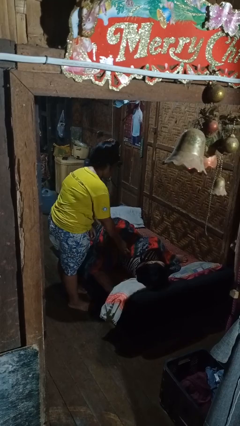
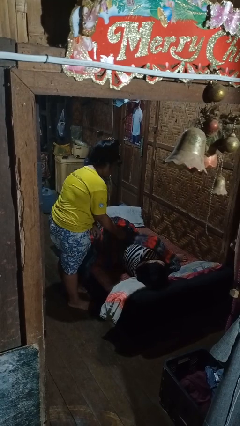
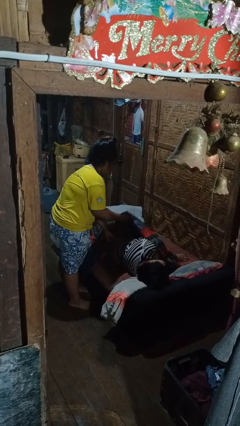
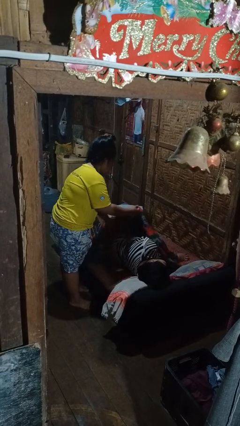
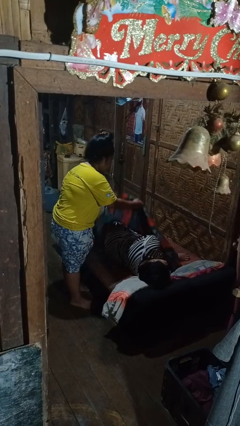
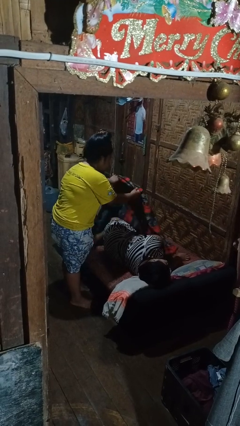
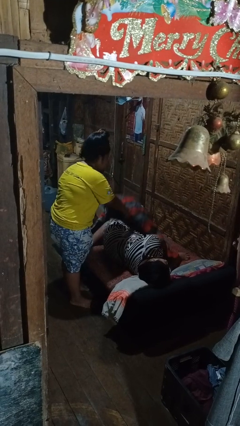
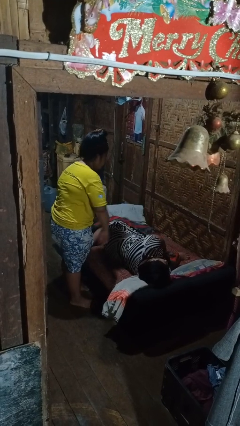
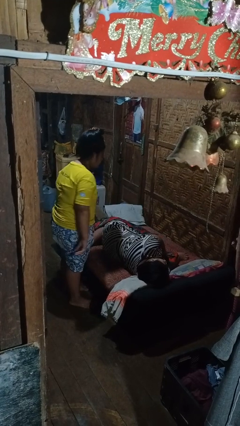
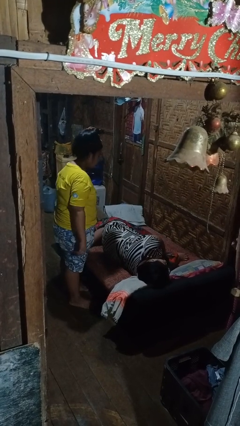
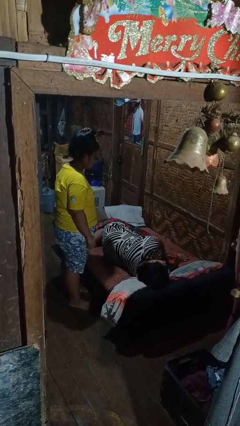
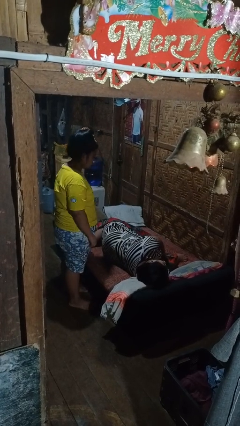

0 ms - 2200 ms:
person uncovers friend with blanket

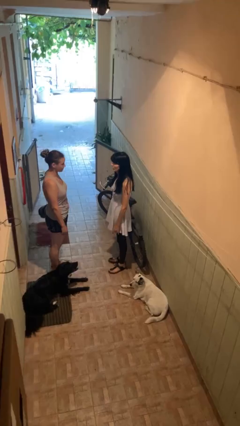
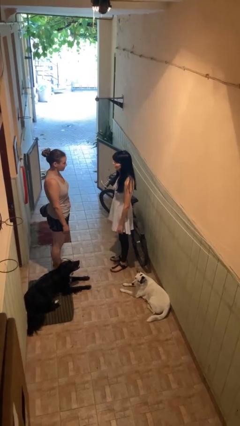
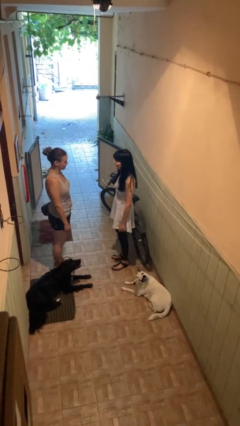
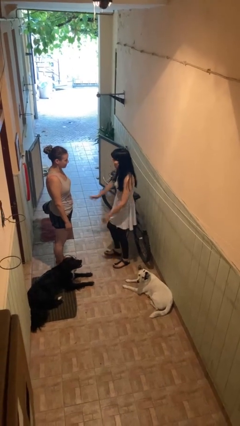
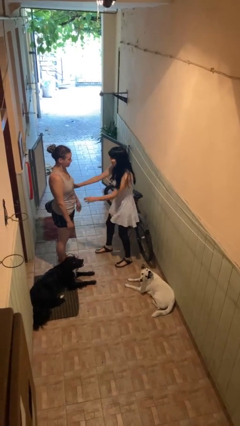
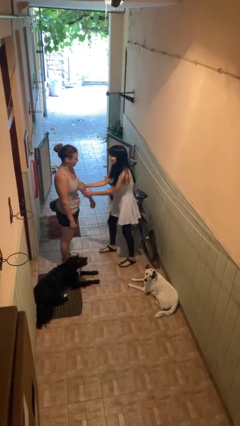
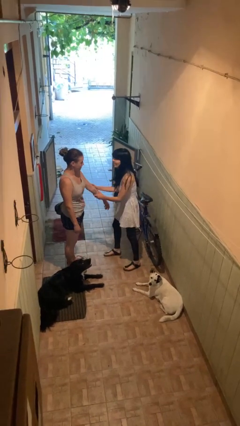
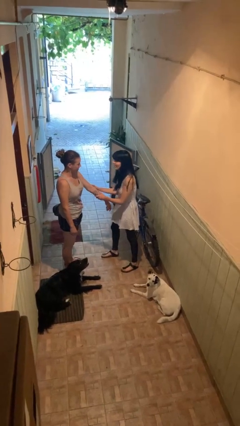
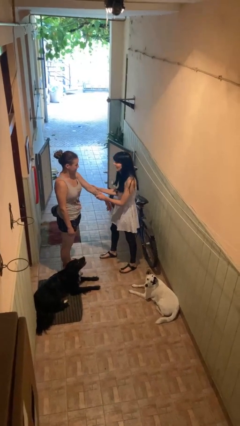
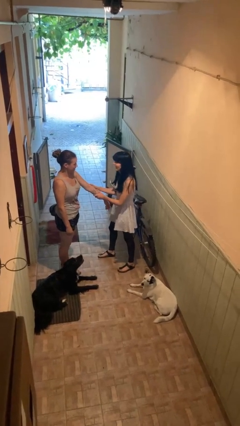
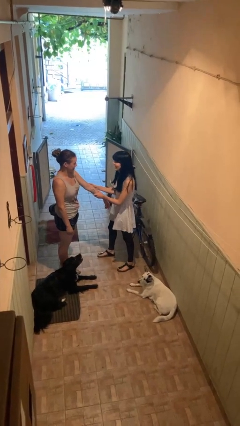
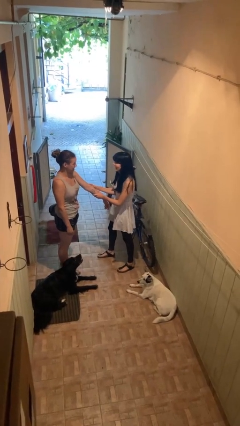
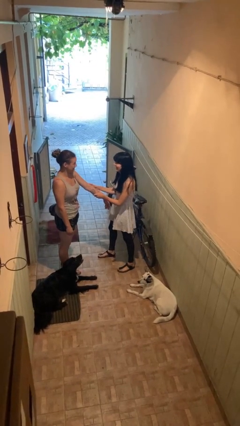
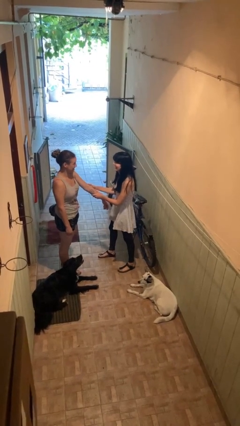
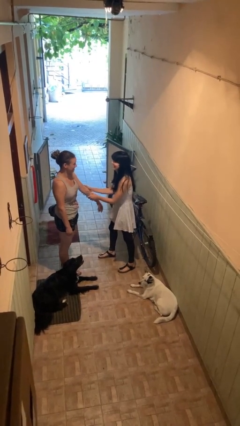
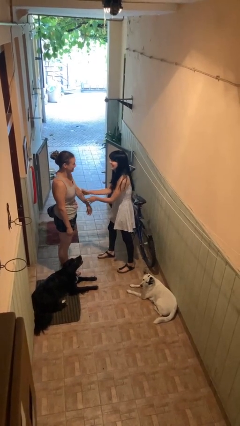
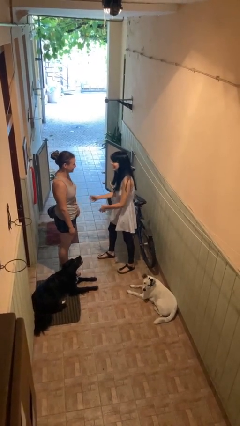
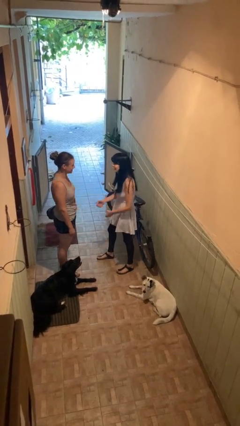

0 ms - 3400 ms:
person grabs person by forearm

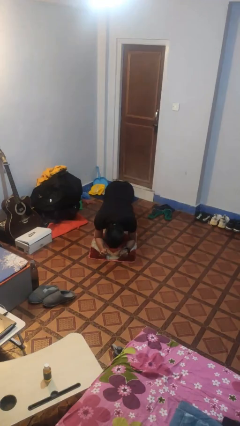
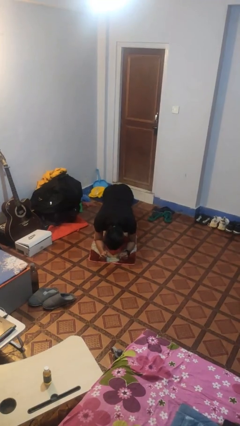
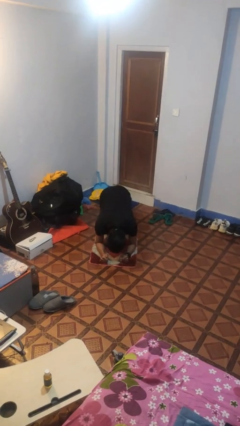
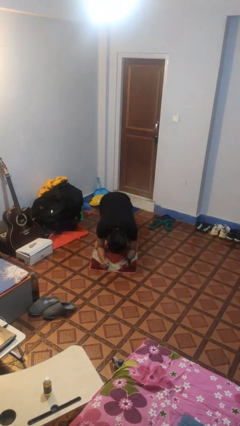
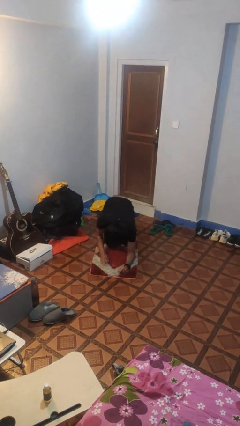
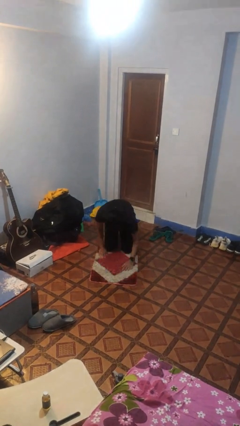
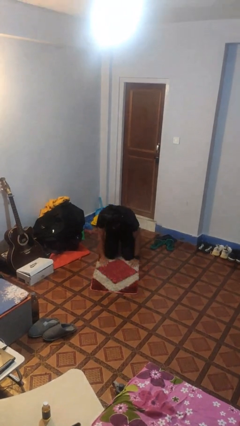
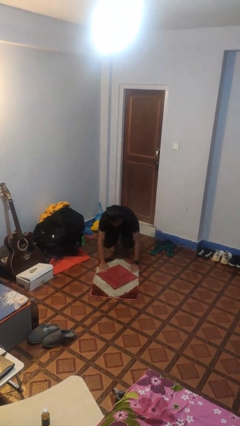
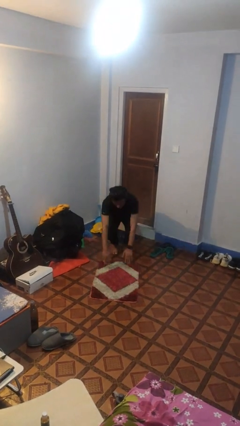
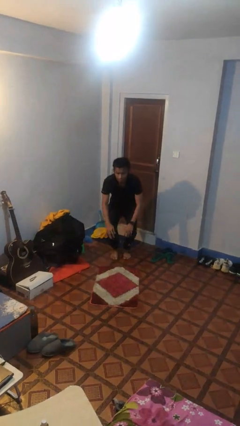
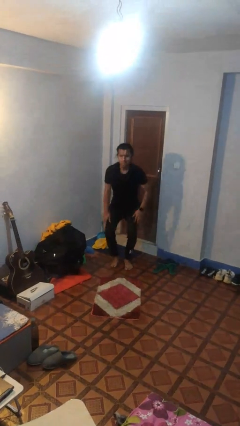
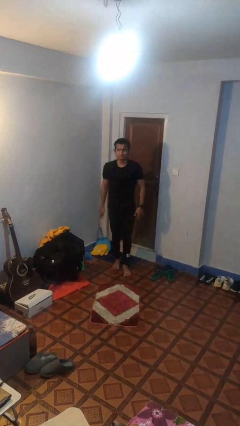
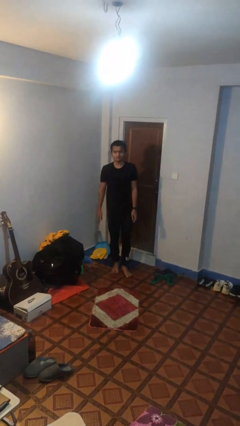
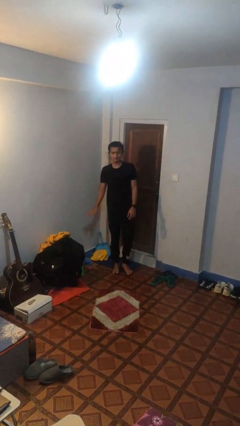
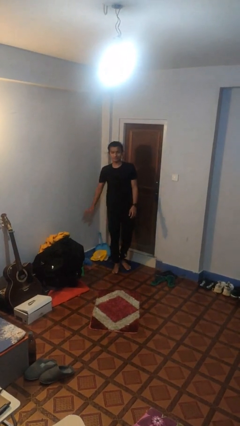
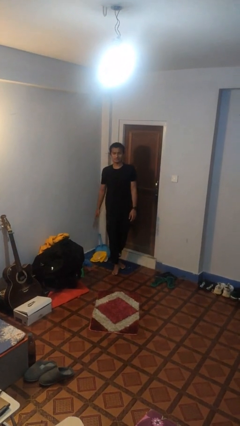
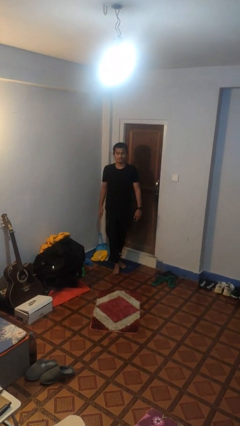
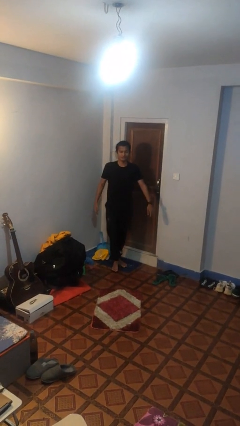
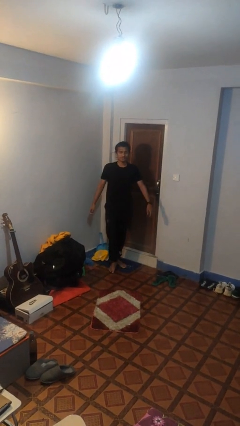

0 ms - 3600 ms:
person stands up from floor

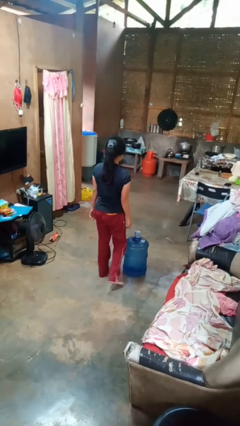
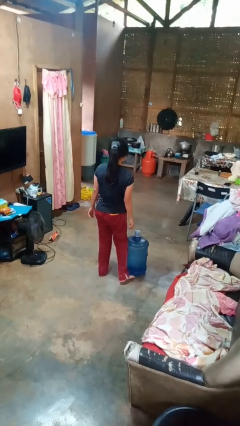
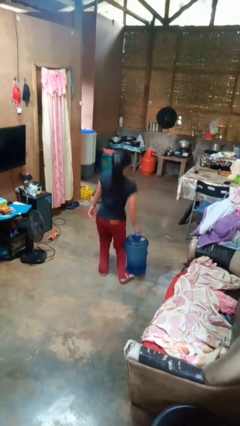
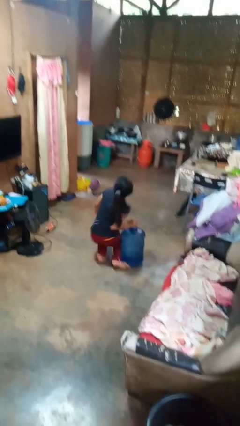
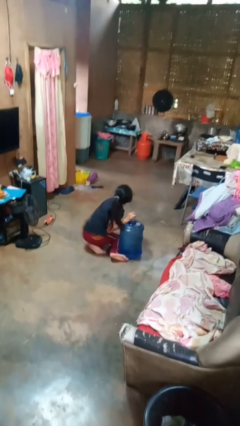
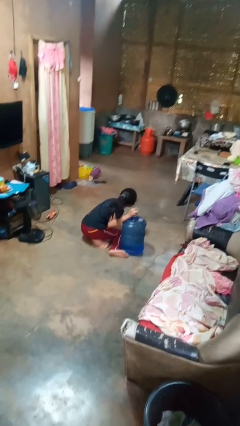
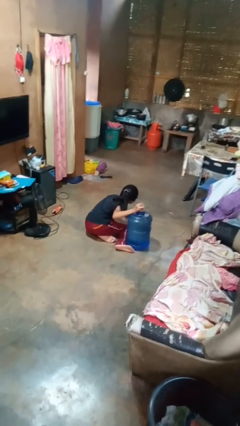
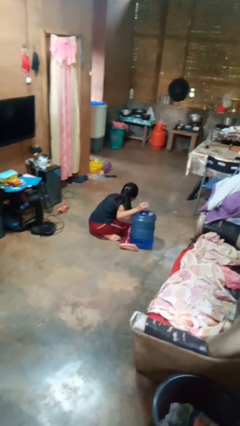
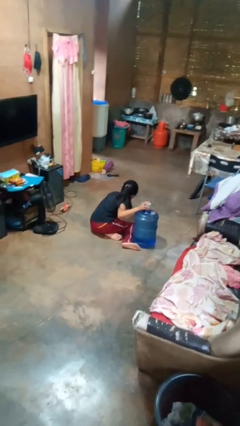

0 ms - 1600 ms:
person trips on object on floor

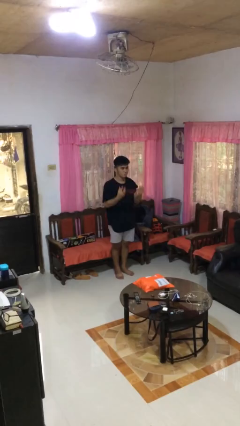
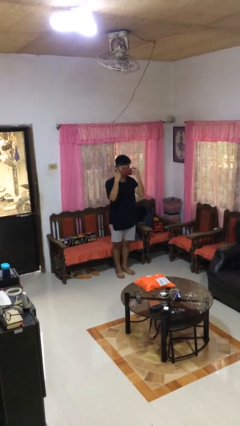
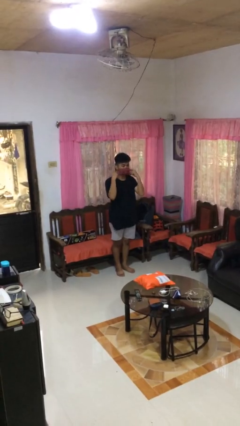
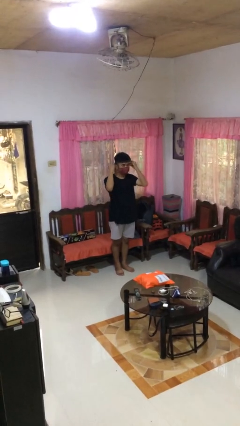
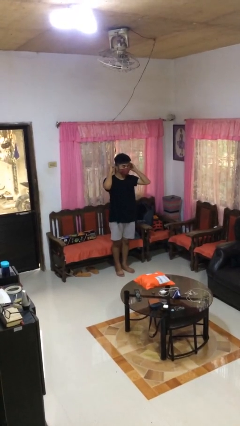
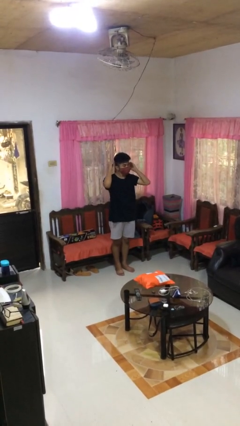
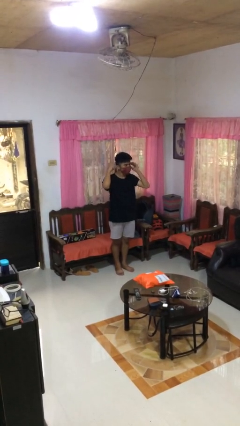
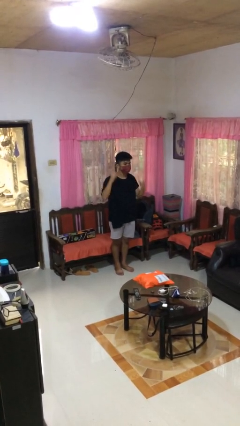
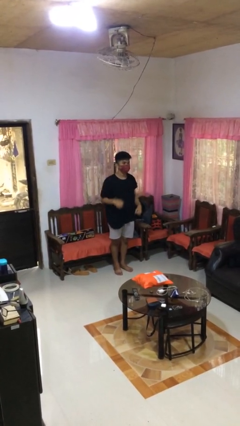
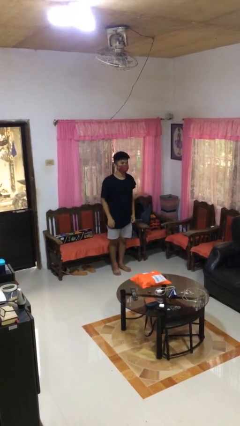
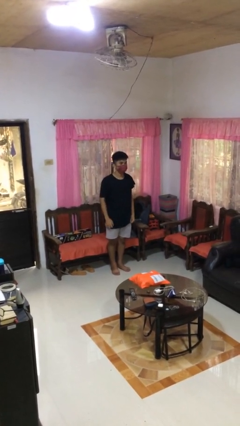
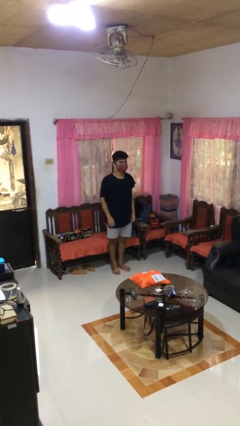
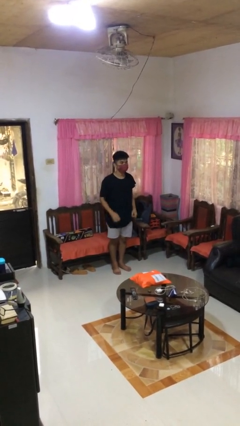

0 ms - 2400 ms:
person puts on facemask

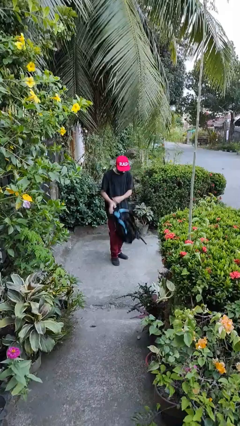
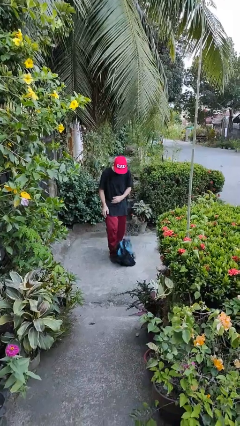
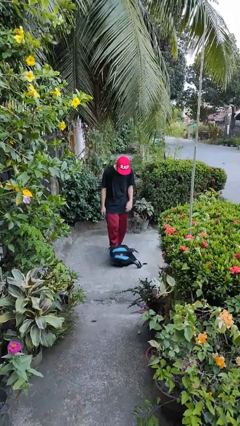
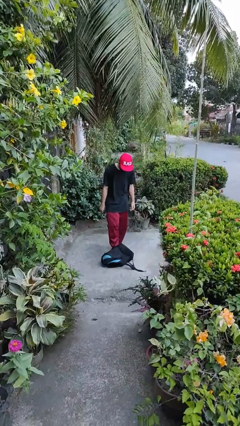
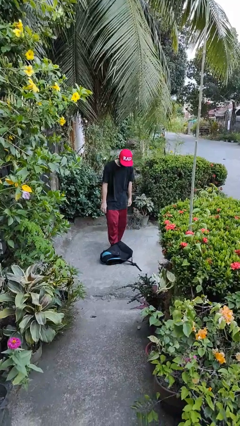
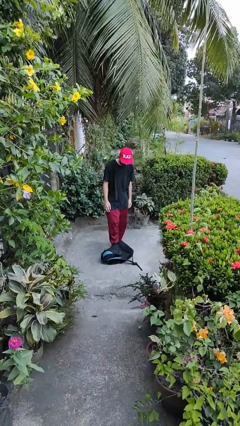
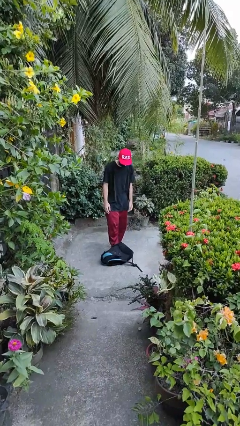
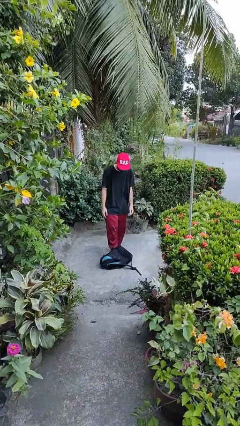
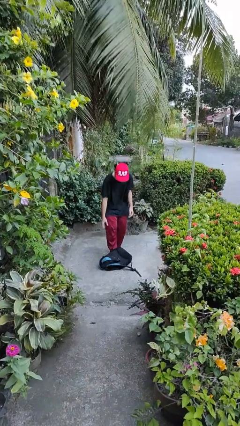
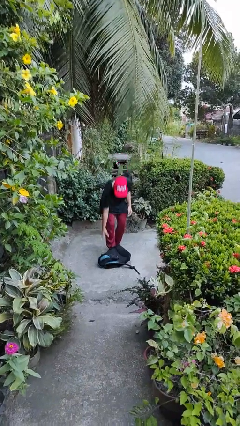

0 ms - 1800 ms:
person drops object

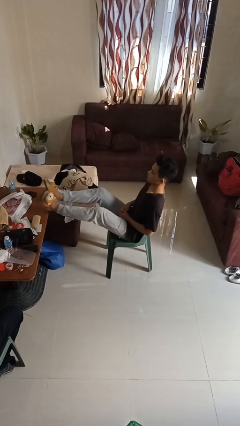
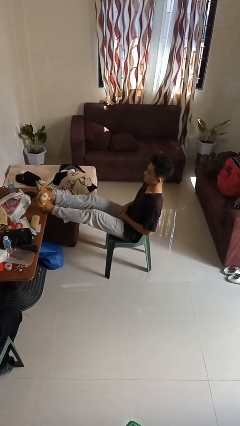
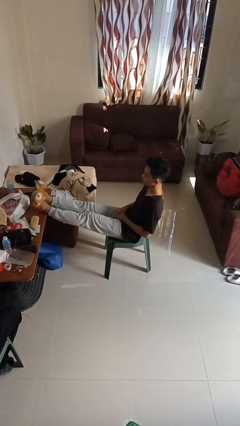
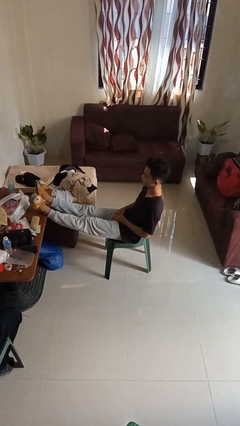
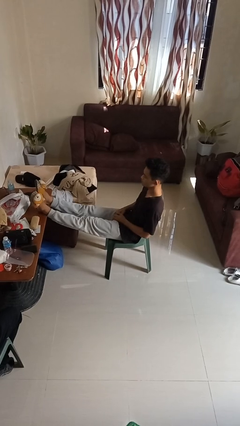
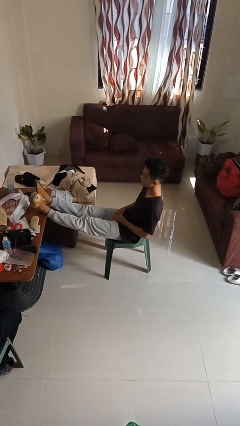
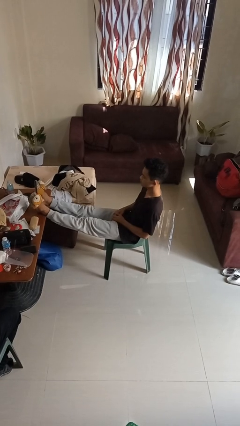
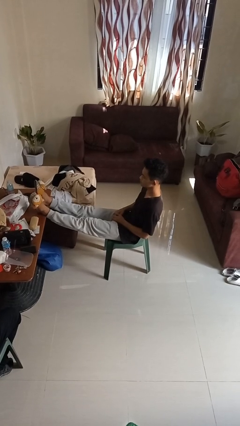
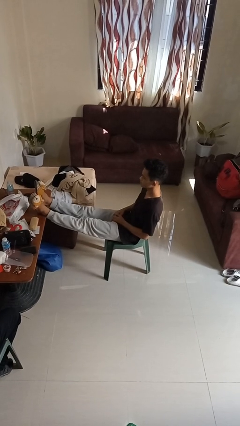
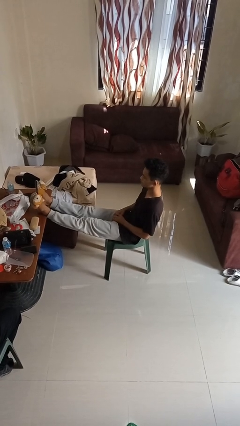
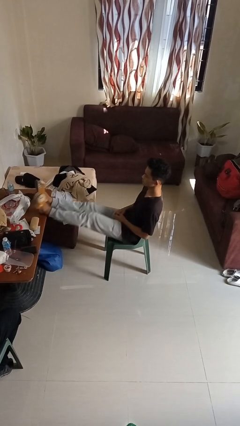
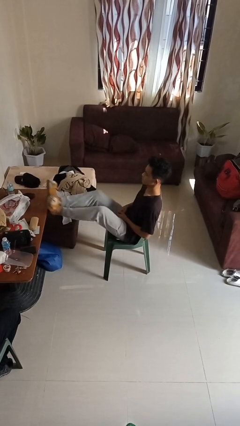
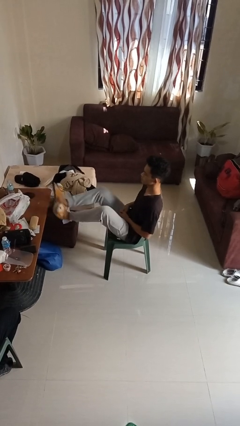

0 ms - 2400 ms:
person puts feet up
